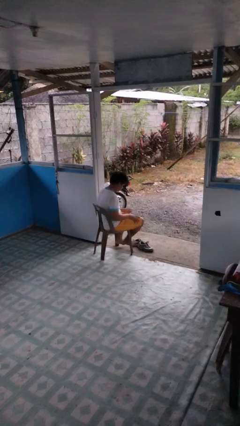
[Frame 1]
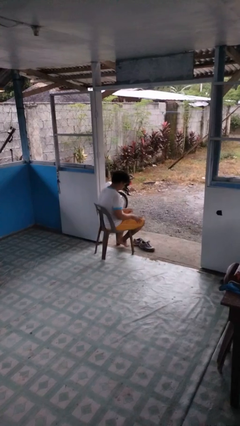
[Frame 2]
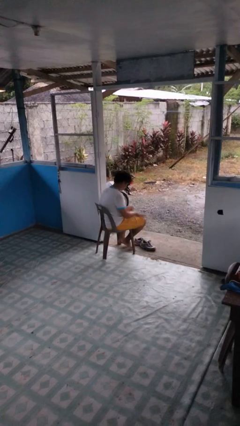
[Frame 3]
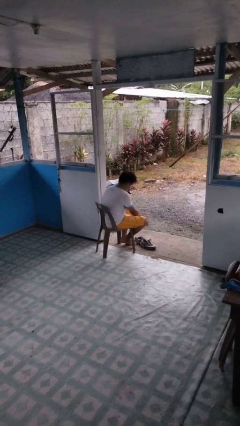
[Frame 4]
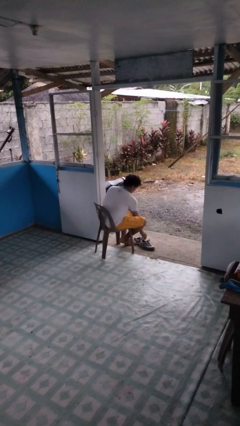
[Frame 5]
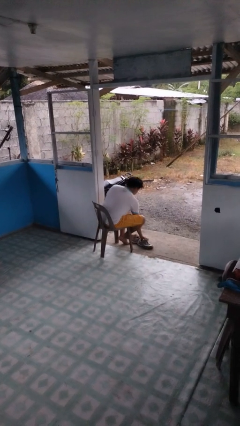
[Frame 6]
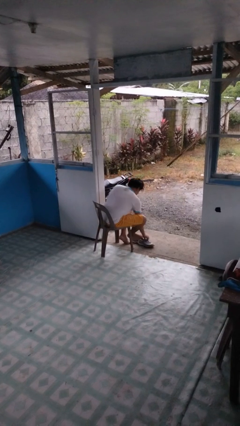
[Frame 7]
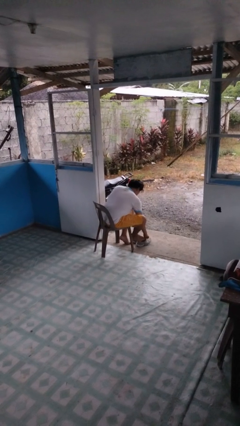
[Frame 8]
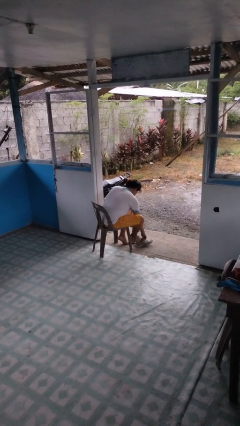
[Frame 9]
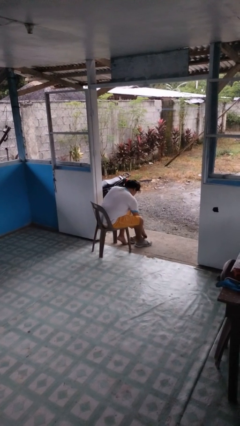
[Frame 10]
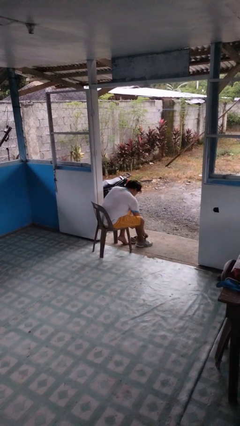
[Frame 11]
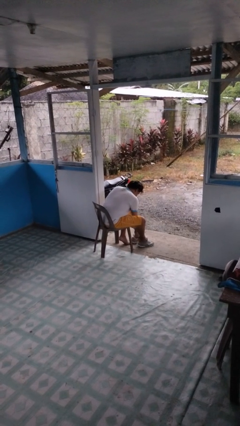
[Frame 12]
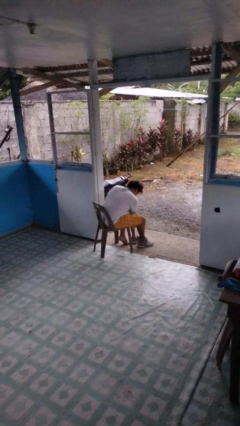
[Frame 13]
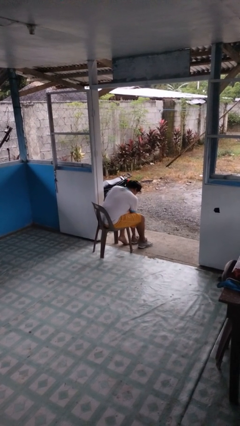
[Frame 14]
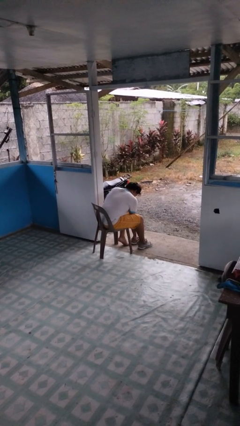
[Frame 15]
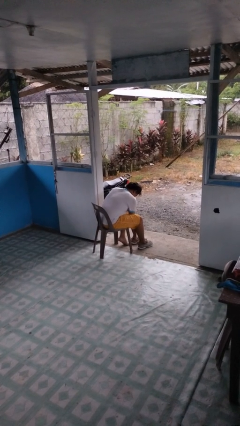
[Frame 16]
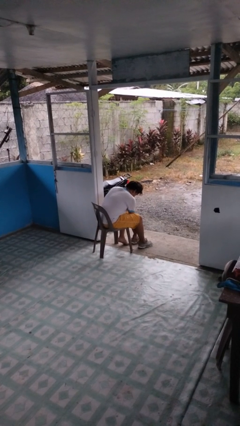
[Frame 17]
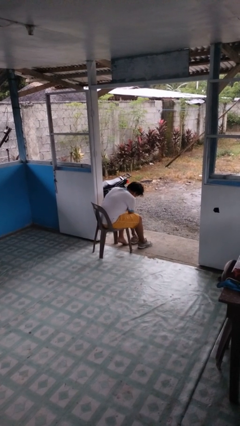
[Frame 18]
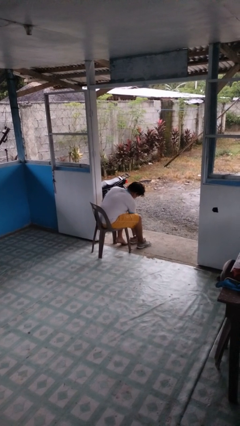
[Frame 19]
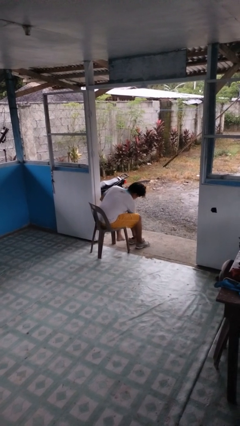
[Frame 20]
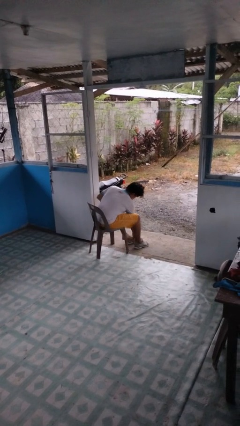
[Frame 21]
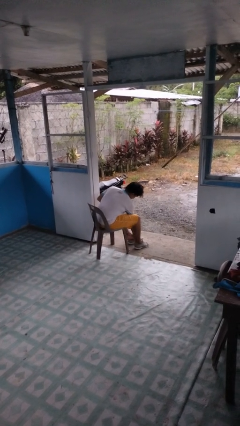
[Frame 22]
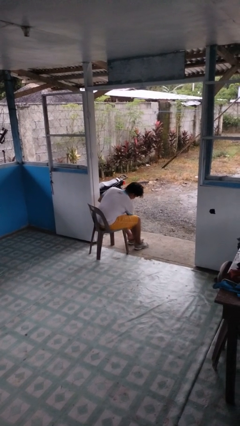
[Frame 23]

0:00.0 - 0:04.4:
person puts on shoes

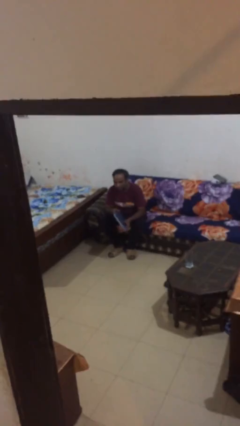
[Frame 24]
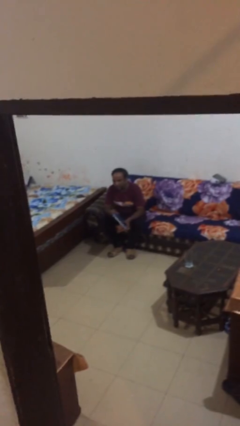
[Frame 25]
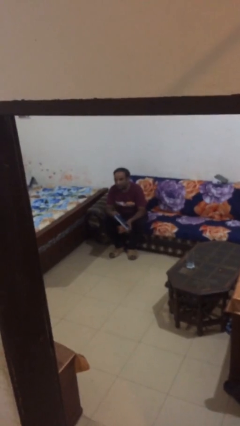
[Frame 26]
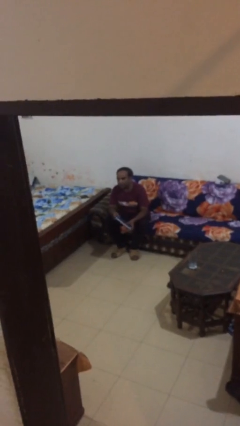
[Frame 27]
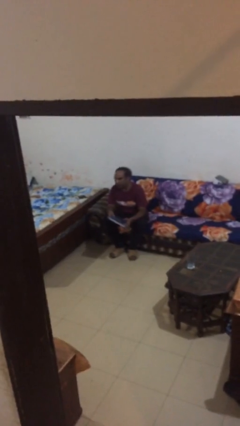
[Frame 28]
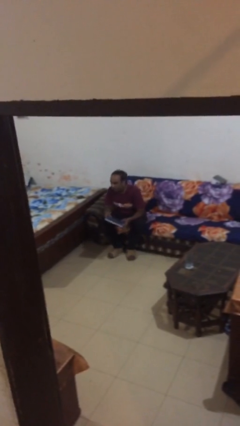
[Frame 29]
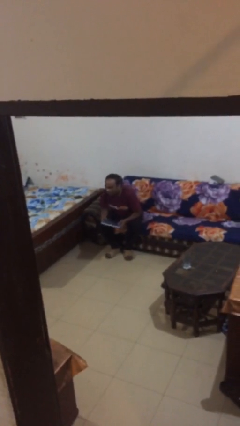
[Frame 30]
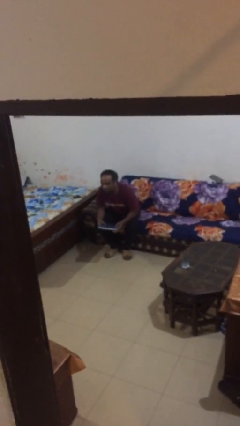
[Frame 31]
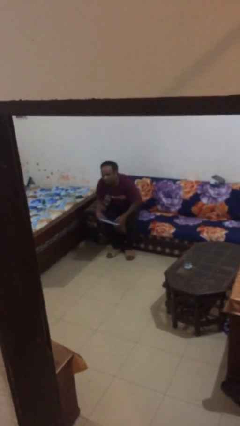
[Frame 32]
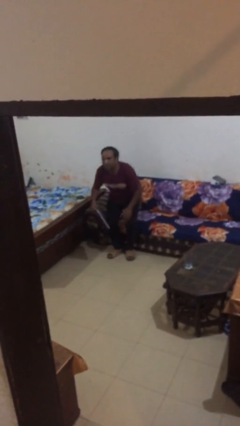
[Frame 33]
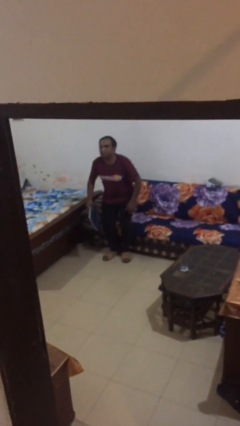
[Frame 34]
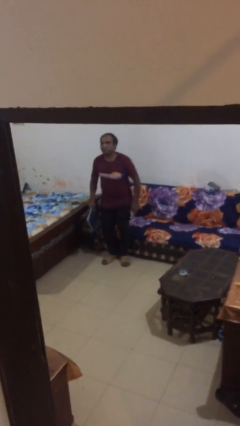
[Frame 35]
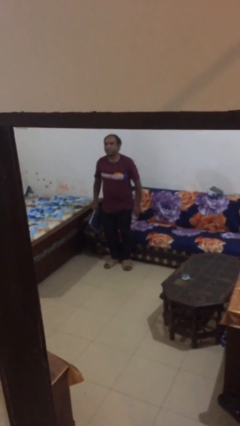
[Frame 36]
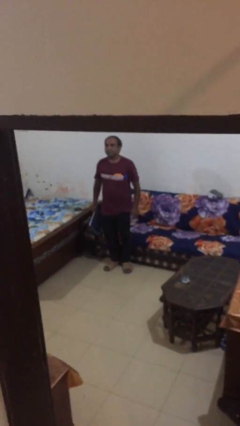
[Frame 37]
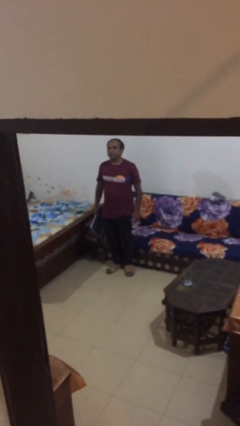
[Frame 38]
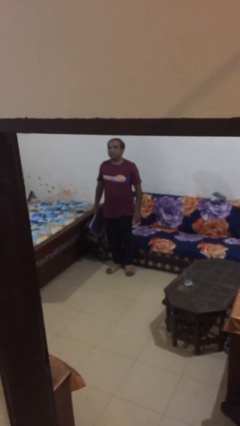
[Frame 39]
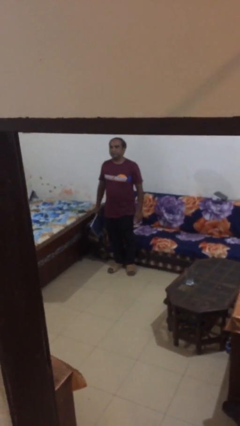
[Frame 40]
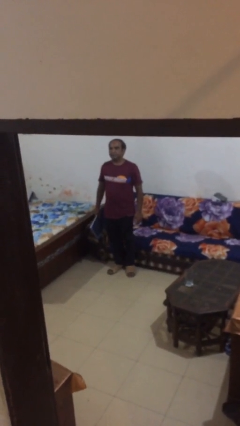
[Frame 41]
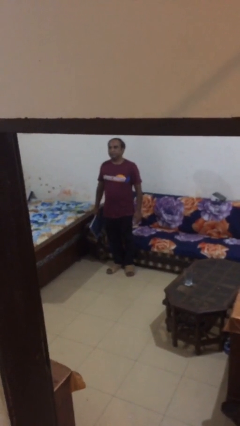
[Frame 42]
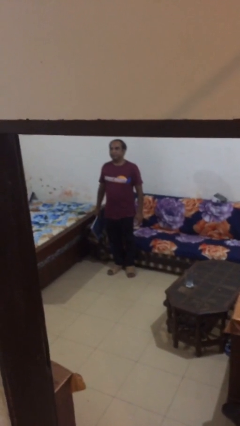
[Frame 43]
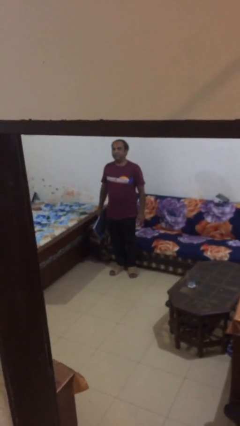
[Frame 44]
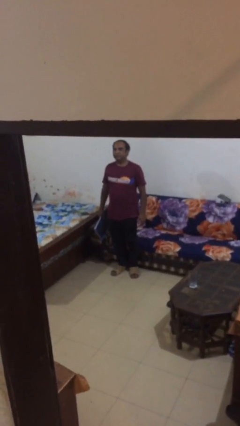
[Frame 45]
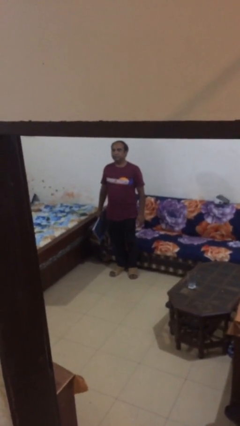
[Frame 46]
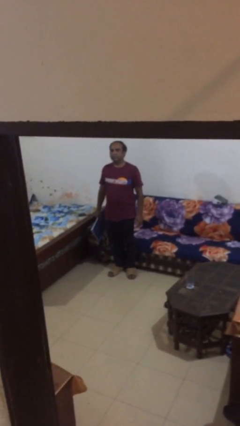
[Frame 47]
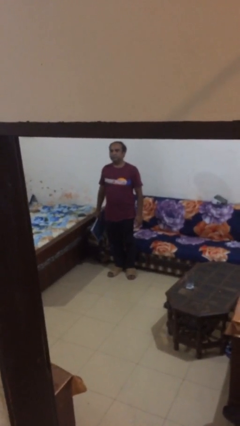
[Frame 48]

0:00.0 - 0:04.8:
person stands up

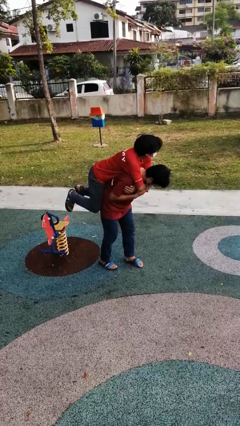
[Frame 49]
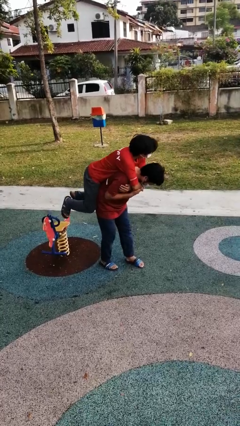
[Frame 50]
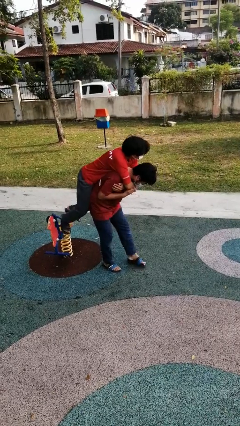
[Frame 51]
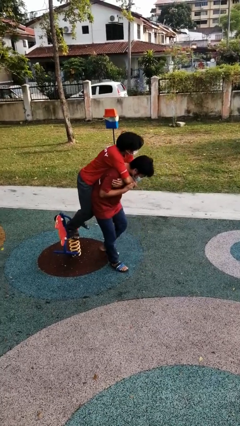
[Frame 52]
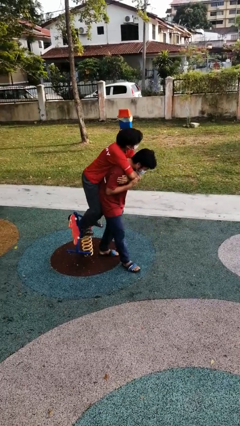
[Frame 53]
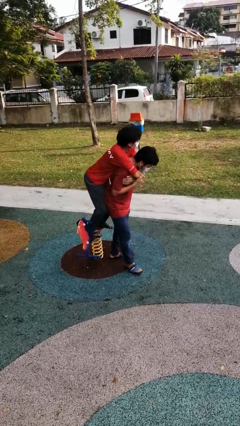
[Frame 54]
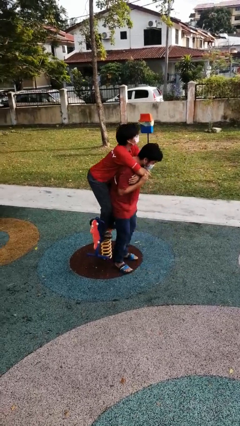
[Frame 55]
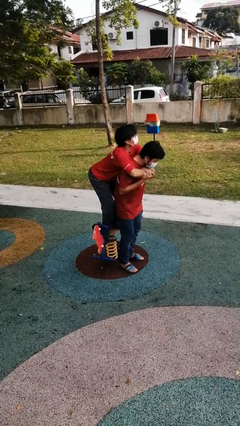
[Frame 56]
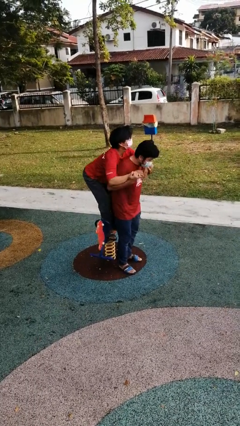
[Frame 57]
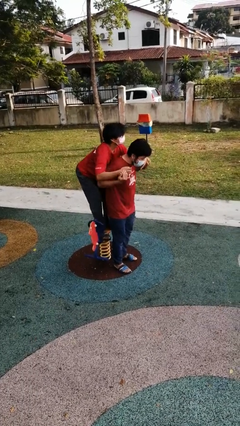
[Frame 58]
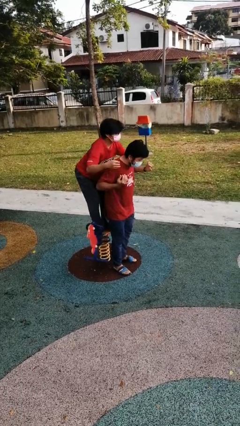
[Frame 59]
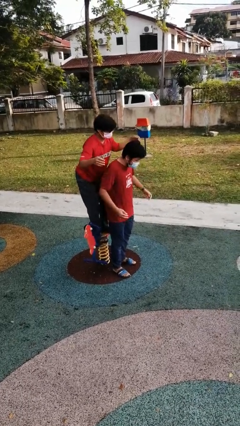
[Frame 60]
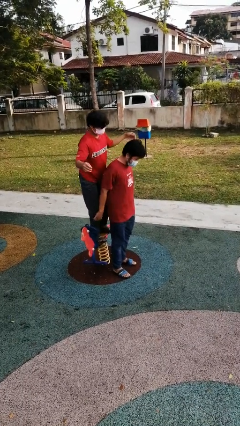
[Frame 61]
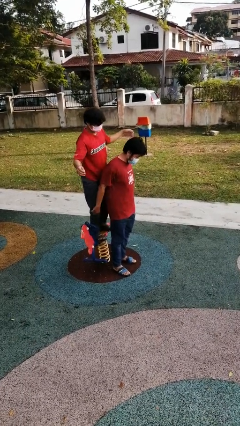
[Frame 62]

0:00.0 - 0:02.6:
person puts down person
